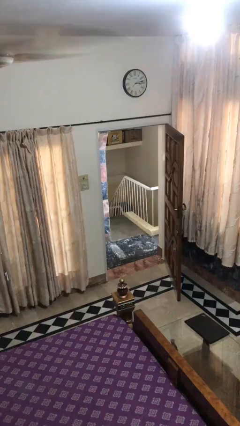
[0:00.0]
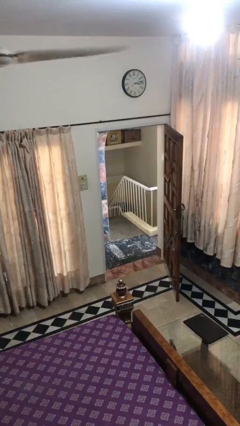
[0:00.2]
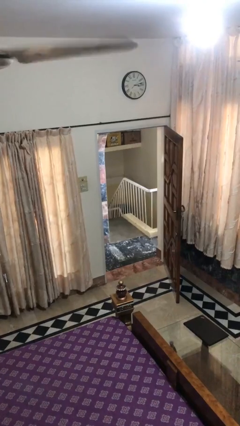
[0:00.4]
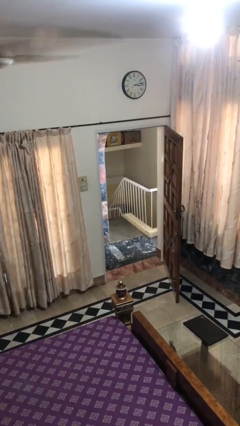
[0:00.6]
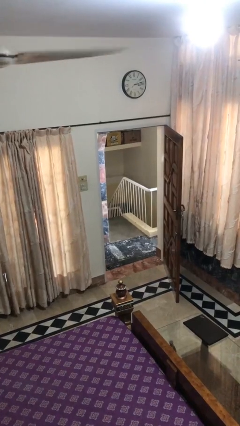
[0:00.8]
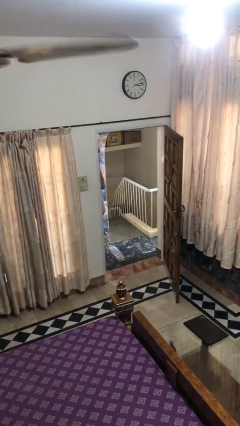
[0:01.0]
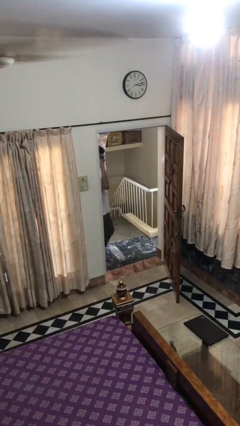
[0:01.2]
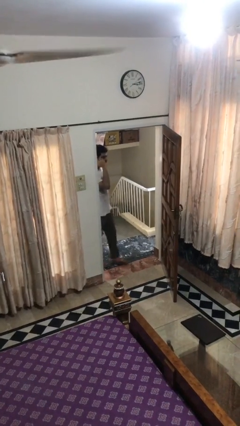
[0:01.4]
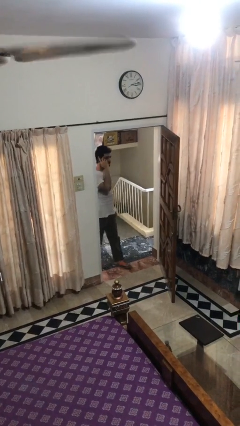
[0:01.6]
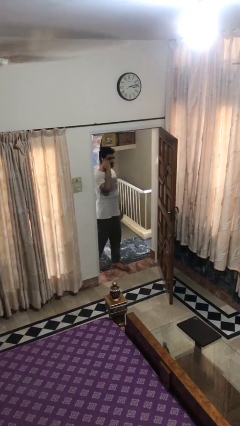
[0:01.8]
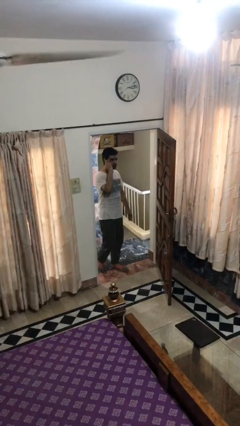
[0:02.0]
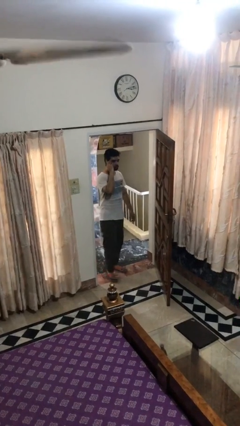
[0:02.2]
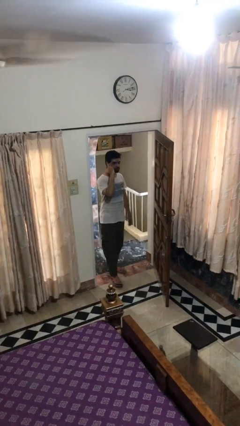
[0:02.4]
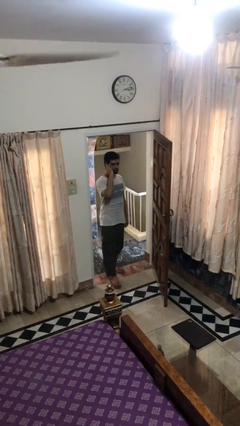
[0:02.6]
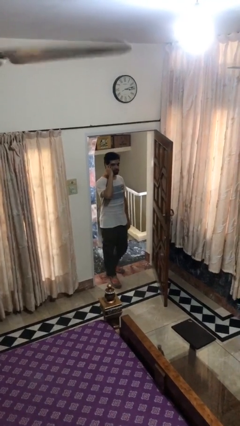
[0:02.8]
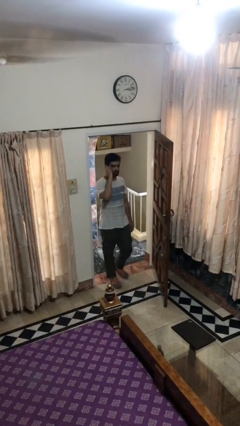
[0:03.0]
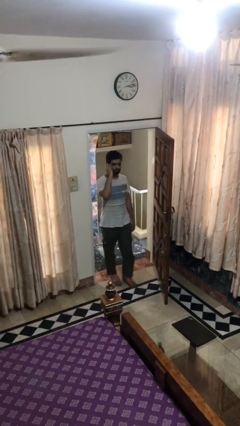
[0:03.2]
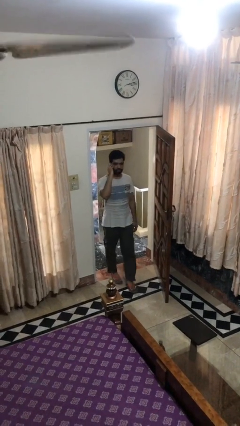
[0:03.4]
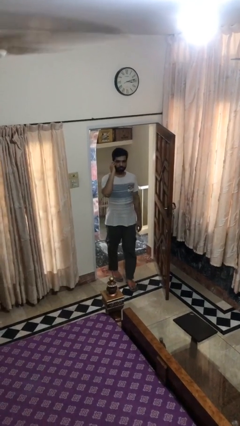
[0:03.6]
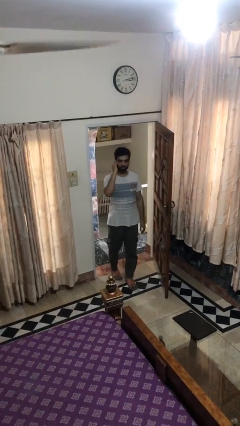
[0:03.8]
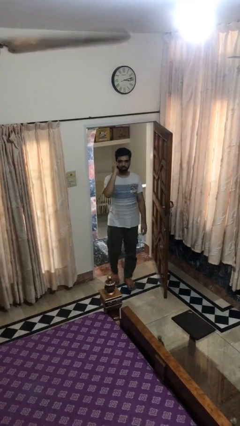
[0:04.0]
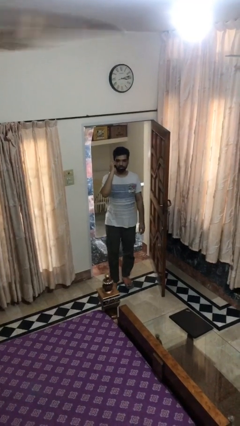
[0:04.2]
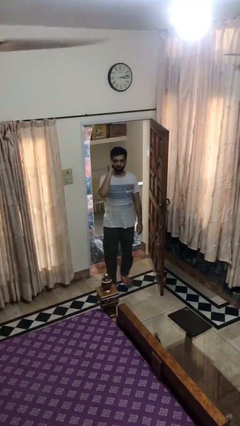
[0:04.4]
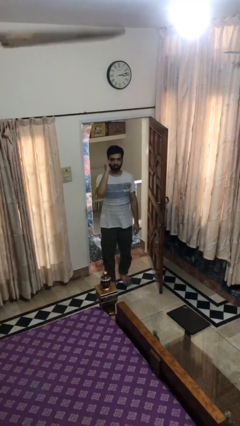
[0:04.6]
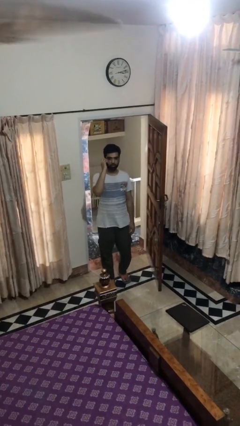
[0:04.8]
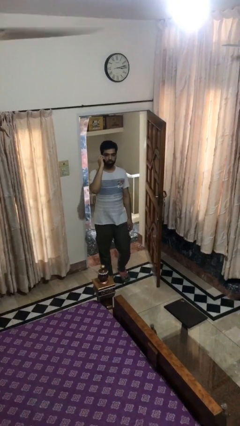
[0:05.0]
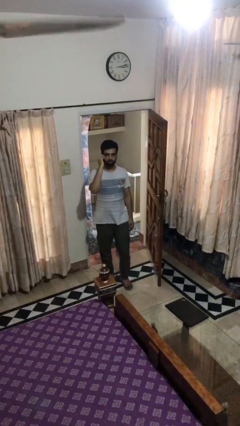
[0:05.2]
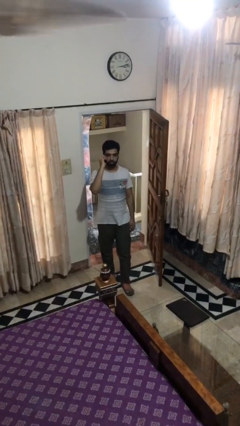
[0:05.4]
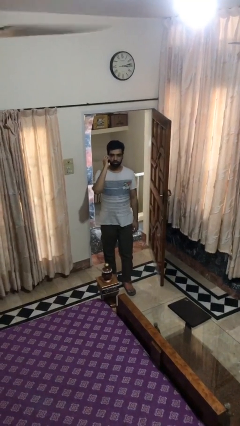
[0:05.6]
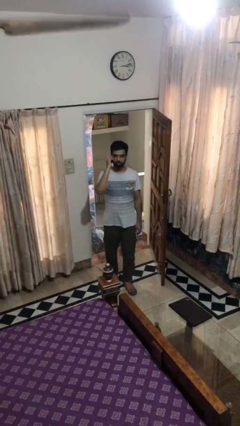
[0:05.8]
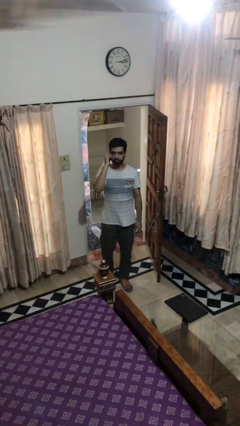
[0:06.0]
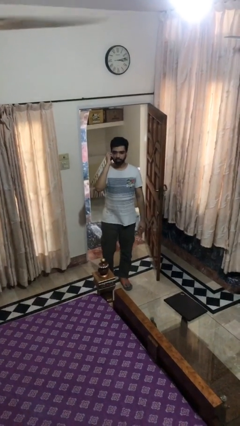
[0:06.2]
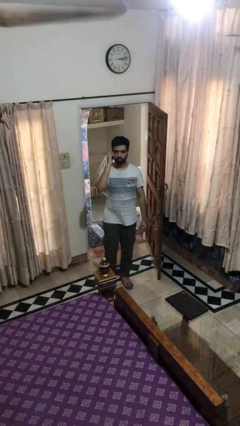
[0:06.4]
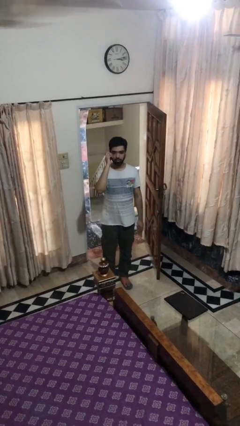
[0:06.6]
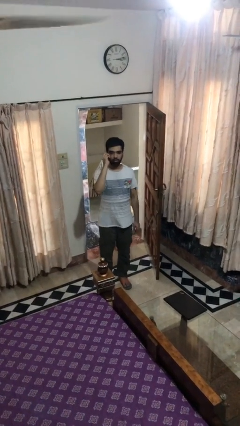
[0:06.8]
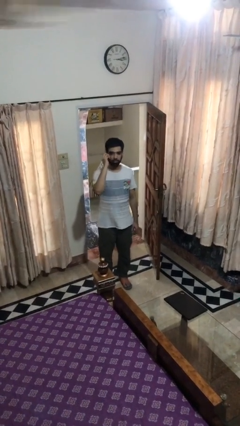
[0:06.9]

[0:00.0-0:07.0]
person enters scene through structure

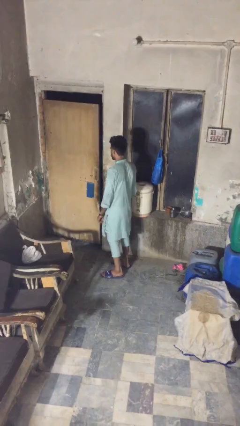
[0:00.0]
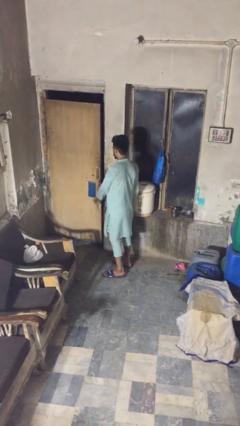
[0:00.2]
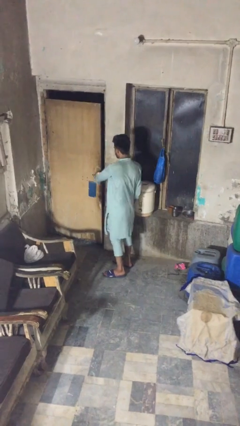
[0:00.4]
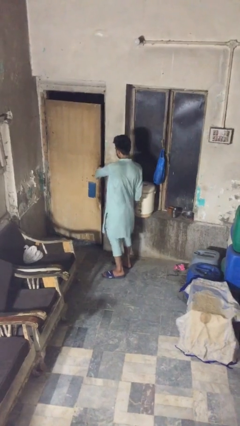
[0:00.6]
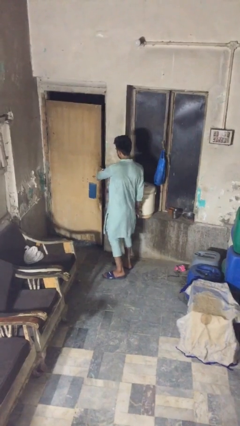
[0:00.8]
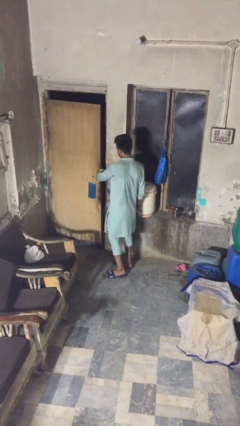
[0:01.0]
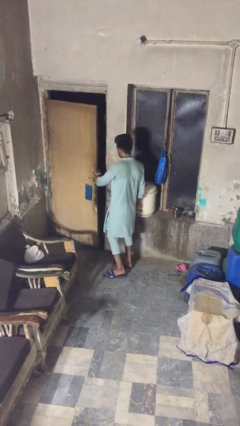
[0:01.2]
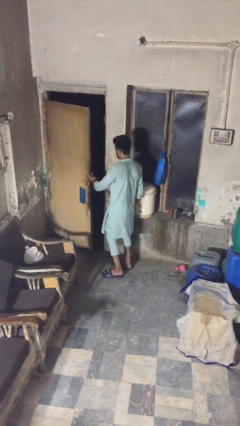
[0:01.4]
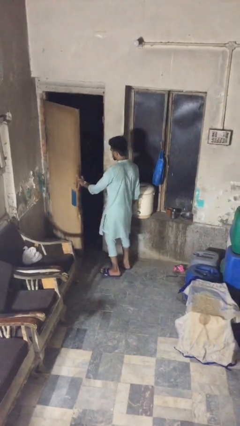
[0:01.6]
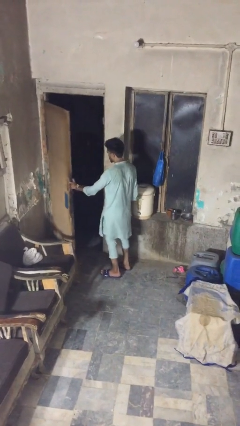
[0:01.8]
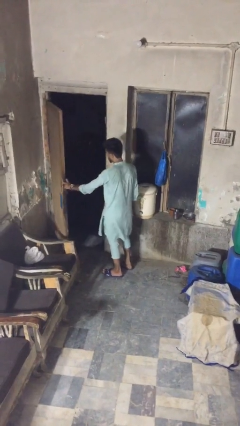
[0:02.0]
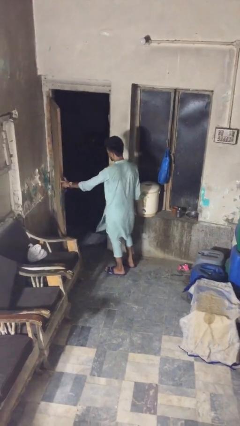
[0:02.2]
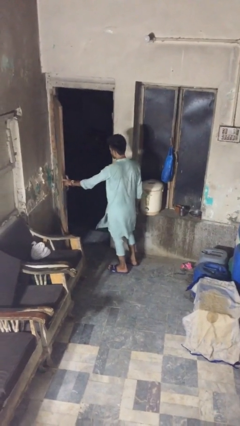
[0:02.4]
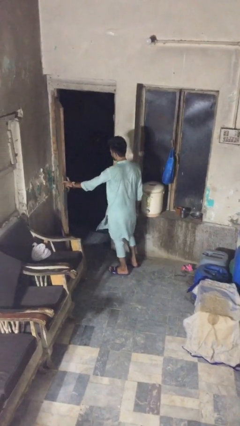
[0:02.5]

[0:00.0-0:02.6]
person opens facility door

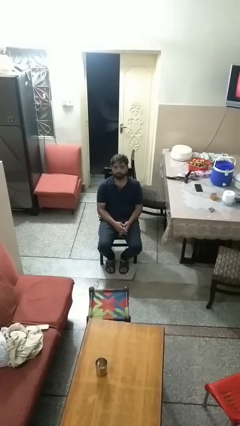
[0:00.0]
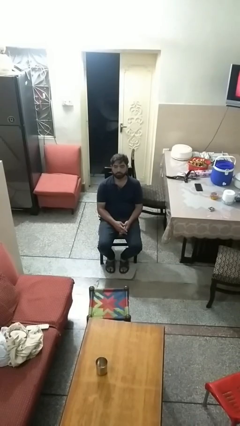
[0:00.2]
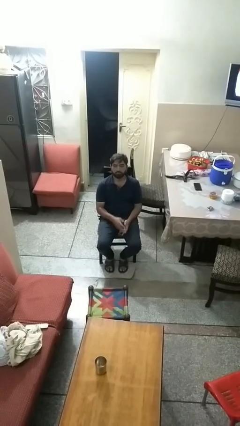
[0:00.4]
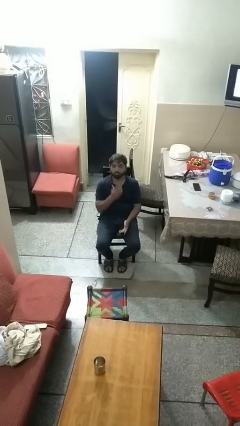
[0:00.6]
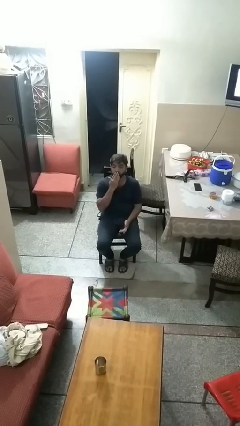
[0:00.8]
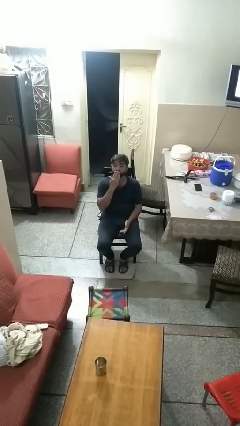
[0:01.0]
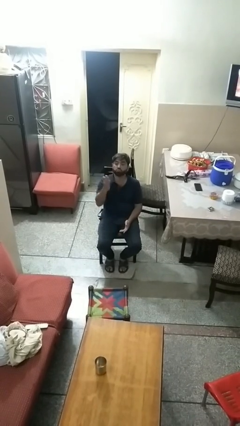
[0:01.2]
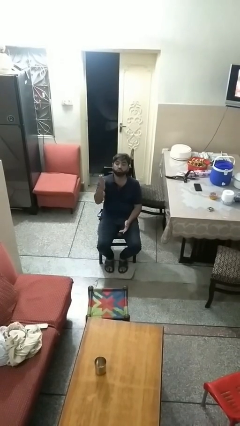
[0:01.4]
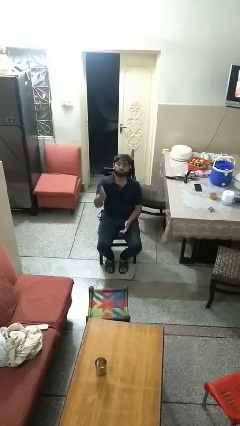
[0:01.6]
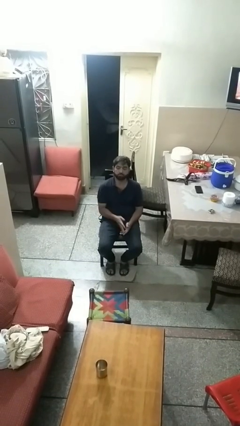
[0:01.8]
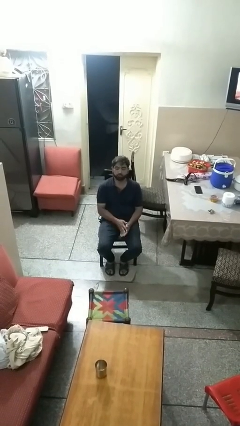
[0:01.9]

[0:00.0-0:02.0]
person gestures blow kiss

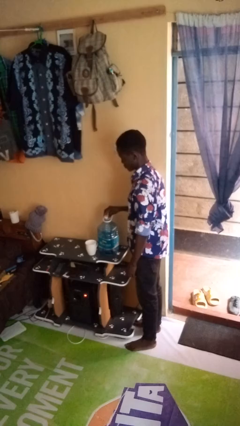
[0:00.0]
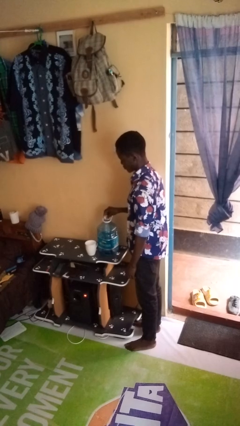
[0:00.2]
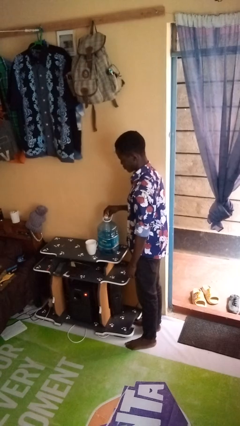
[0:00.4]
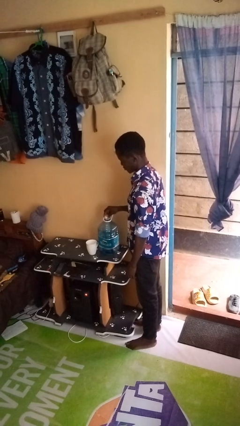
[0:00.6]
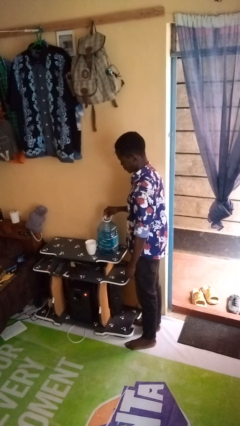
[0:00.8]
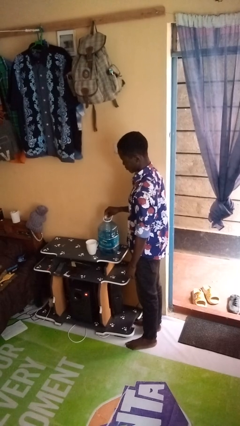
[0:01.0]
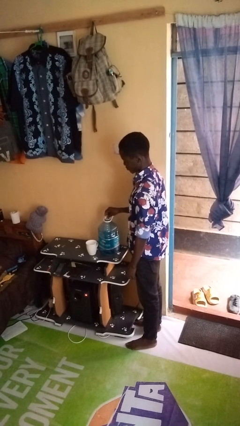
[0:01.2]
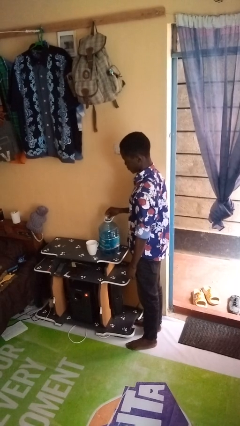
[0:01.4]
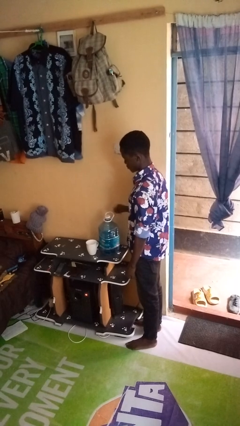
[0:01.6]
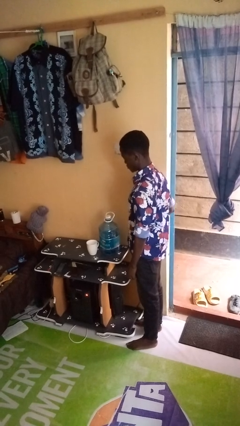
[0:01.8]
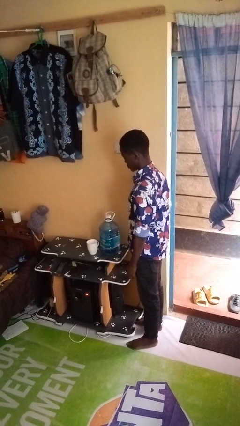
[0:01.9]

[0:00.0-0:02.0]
person screws lid to bottle

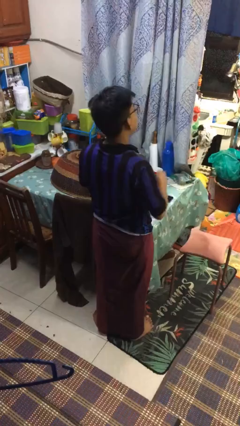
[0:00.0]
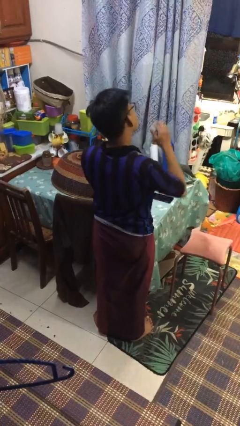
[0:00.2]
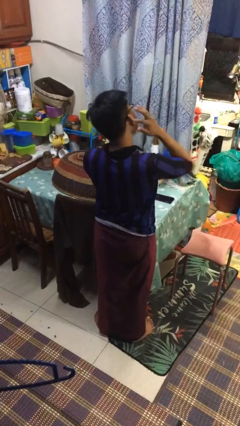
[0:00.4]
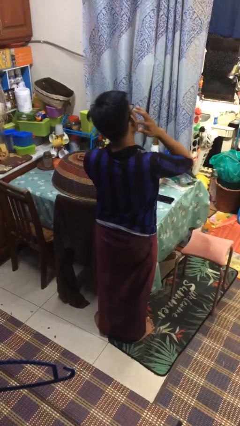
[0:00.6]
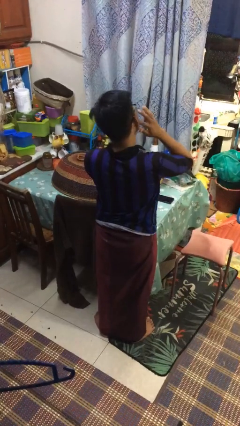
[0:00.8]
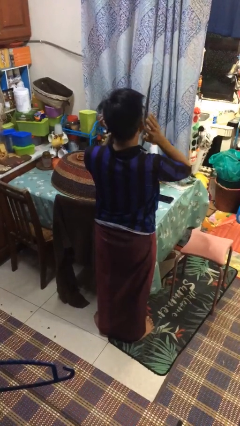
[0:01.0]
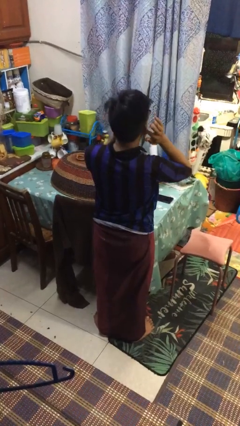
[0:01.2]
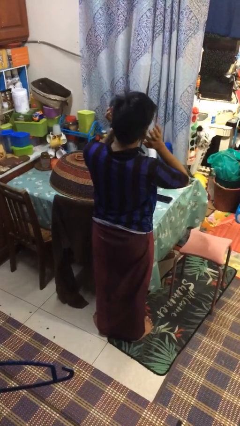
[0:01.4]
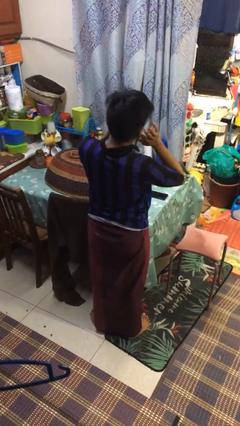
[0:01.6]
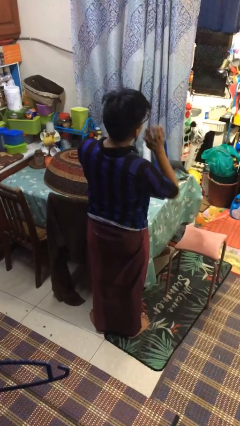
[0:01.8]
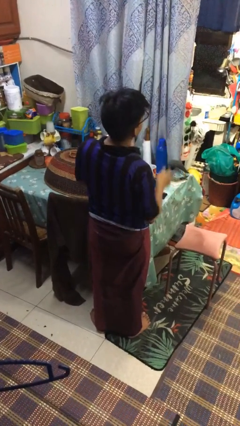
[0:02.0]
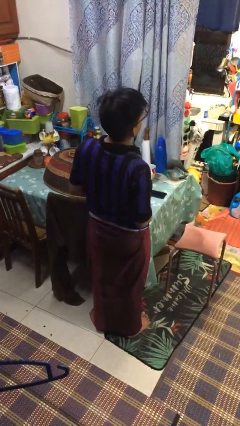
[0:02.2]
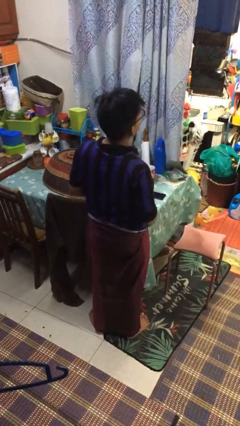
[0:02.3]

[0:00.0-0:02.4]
person puts fingers in ear

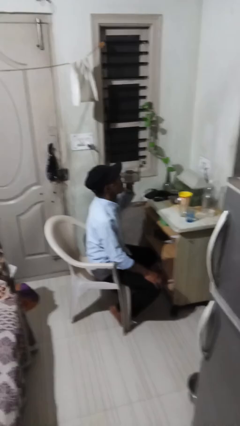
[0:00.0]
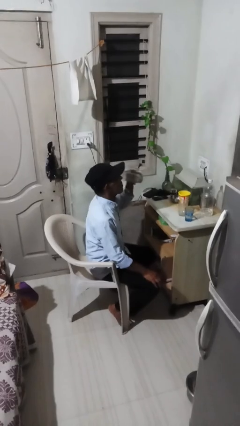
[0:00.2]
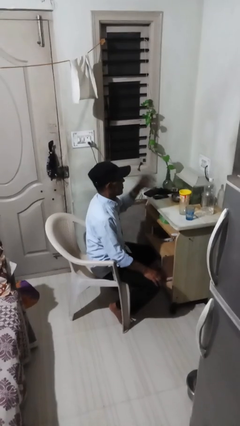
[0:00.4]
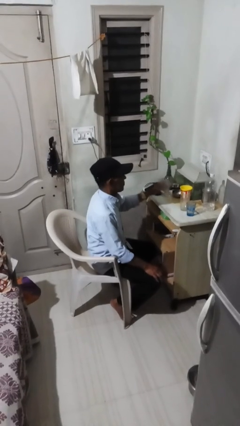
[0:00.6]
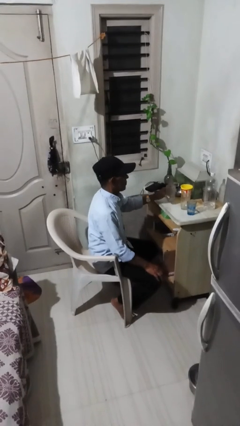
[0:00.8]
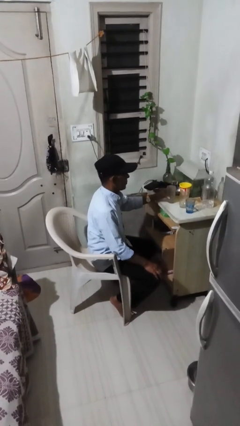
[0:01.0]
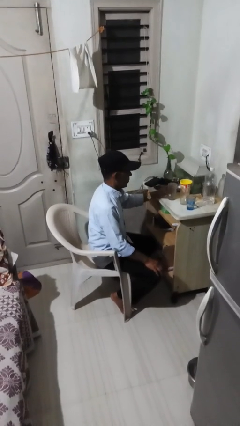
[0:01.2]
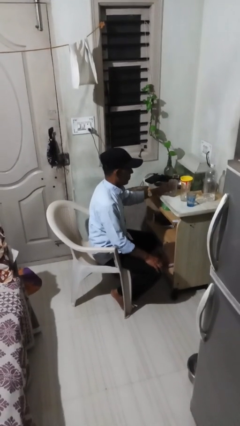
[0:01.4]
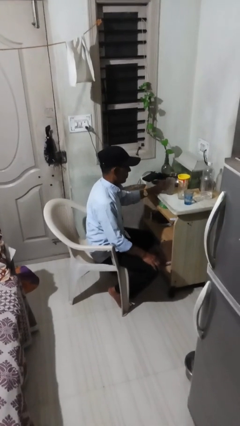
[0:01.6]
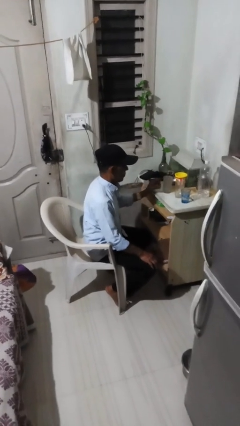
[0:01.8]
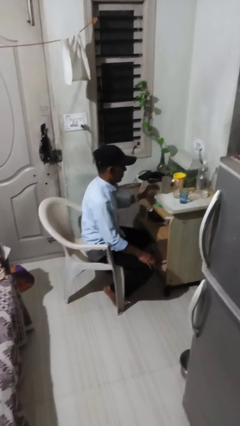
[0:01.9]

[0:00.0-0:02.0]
person puts down object on table
